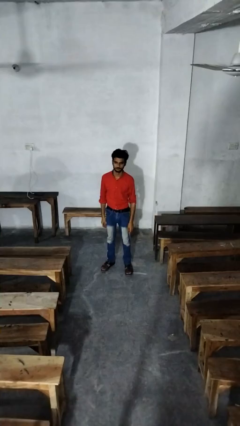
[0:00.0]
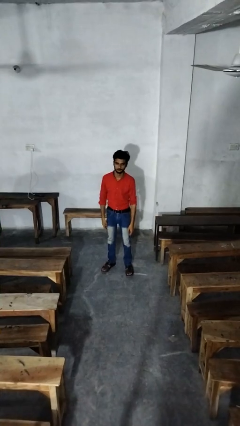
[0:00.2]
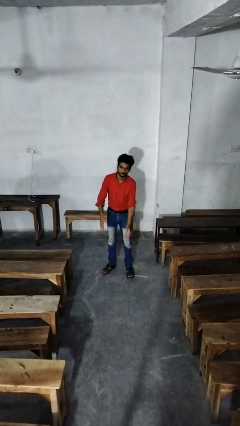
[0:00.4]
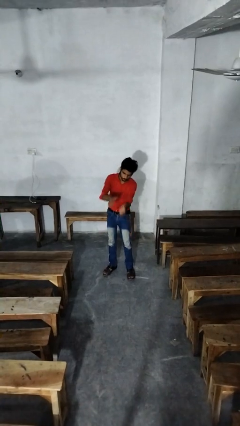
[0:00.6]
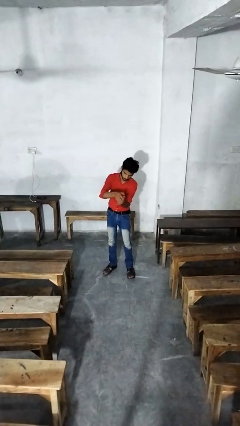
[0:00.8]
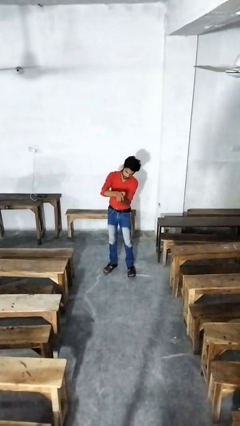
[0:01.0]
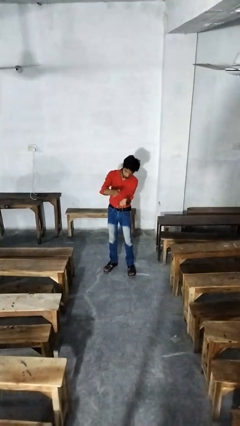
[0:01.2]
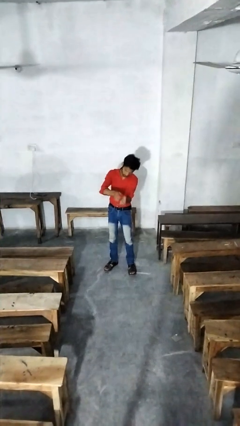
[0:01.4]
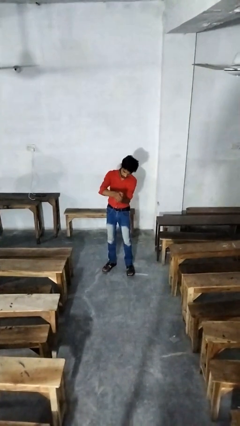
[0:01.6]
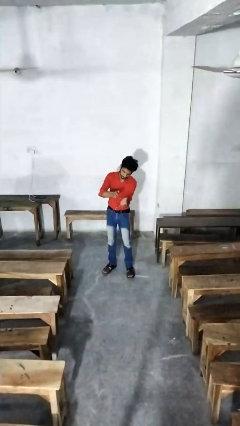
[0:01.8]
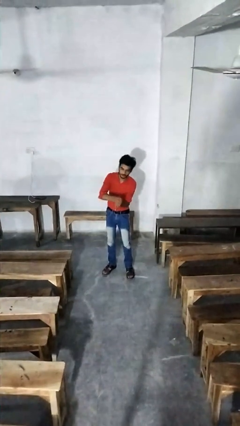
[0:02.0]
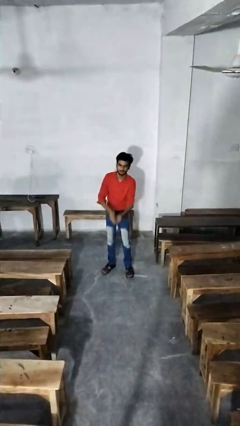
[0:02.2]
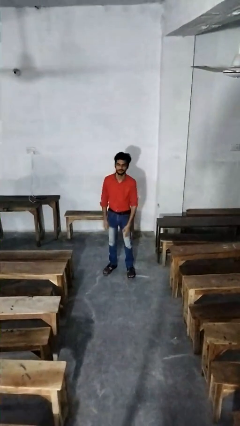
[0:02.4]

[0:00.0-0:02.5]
person claps hands

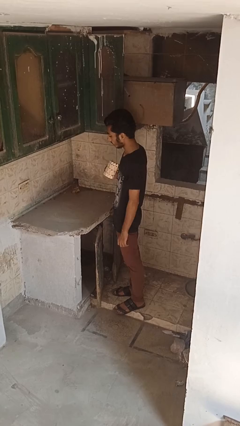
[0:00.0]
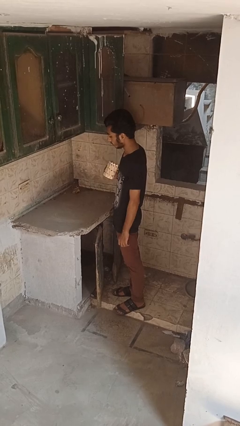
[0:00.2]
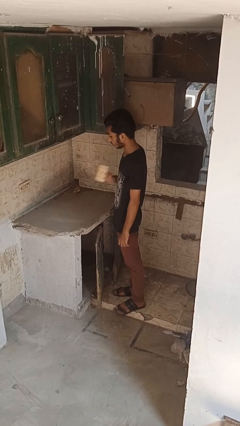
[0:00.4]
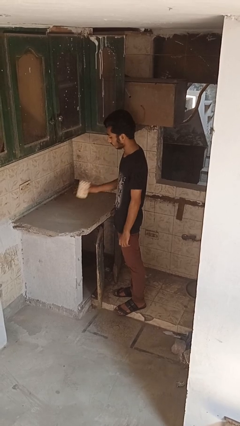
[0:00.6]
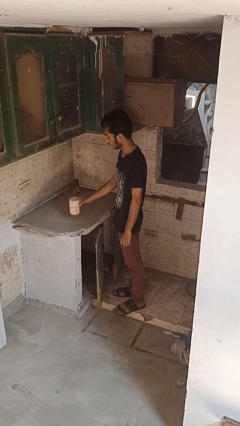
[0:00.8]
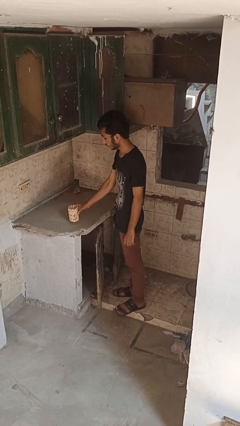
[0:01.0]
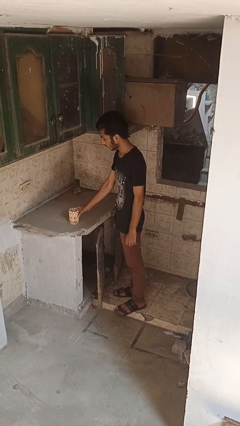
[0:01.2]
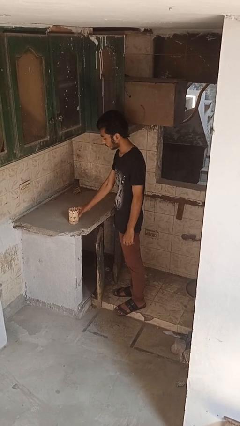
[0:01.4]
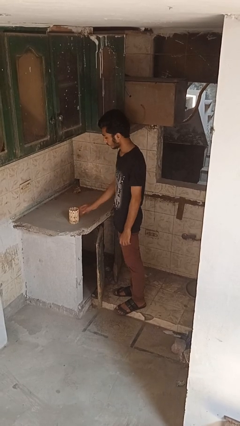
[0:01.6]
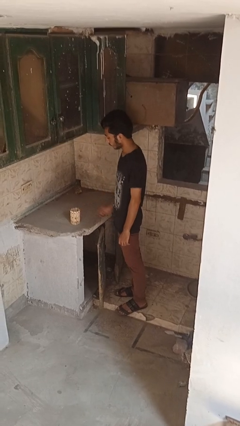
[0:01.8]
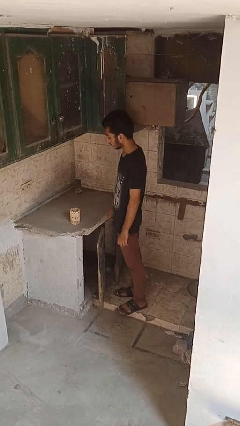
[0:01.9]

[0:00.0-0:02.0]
person puts down object on countertop

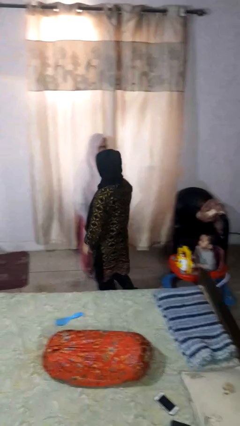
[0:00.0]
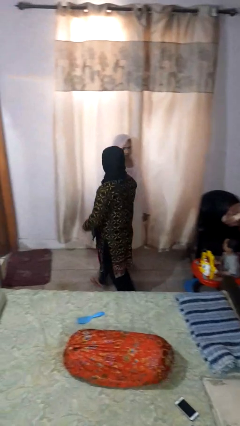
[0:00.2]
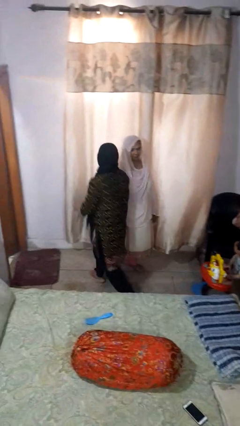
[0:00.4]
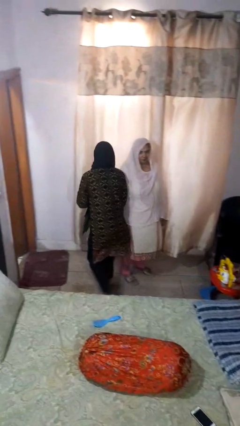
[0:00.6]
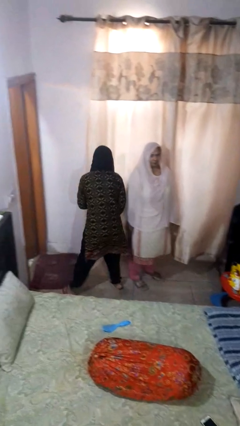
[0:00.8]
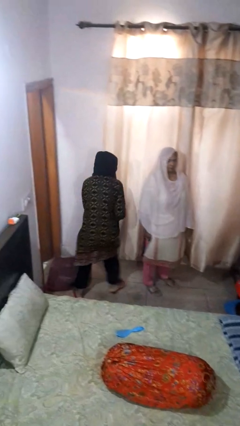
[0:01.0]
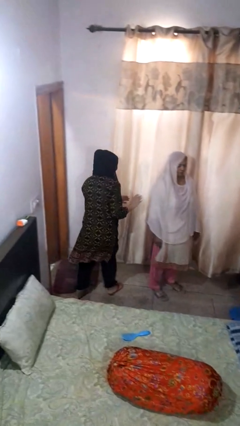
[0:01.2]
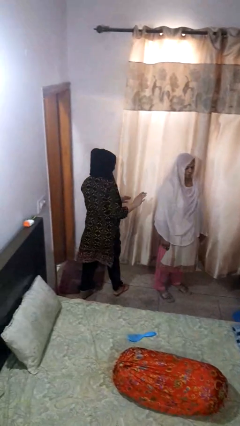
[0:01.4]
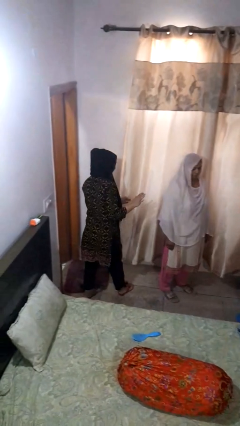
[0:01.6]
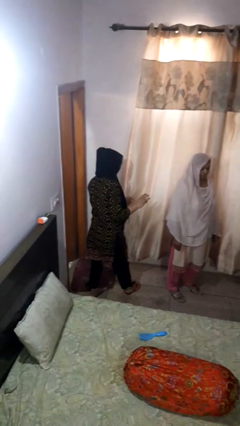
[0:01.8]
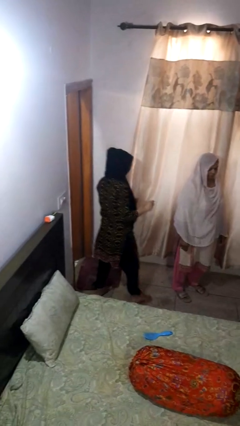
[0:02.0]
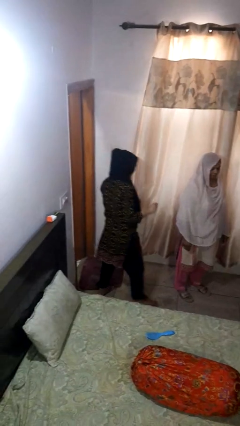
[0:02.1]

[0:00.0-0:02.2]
person bumps into person

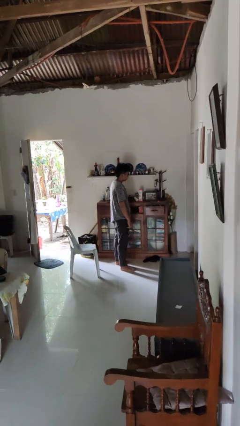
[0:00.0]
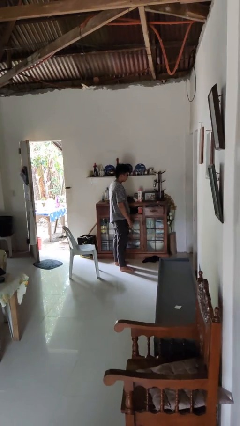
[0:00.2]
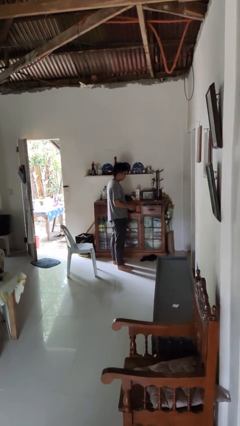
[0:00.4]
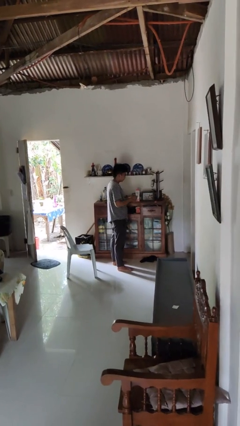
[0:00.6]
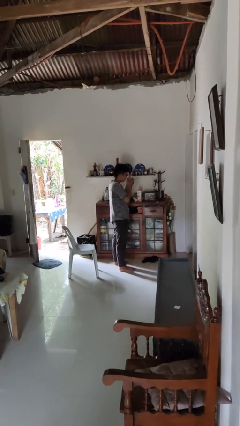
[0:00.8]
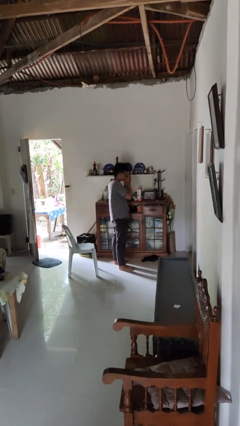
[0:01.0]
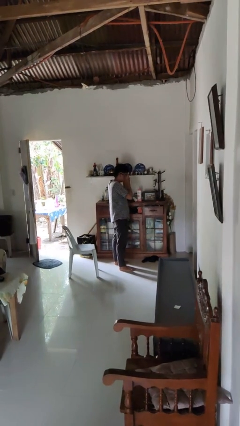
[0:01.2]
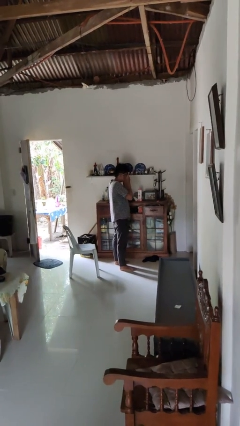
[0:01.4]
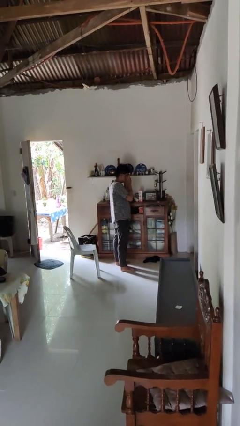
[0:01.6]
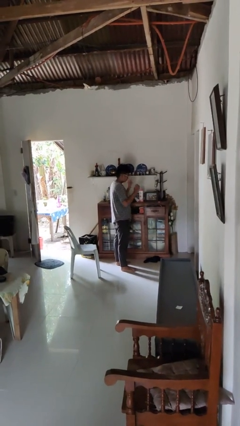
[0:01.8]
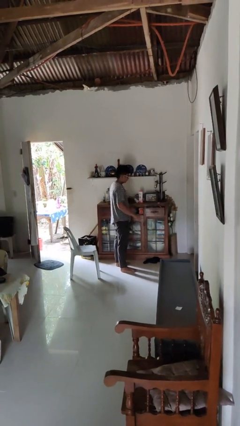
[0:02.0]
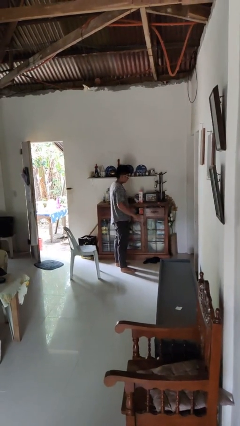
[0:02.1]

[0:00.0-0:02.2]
person puts on sunglasses

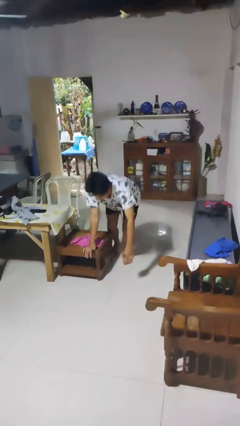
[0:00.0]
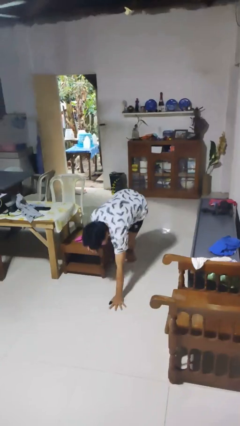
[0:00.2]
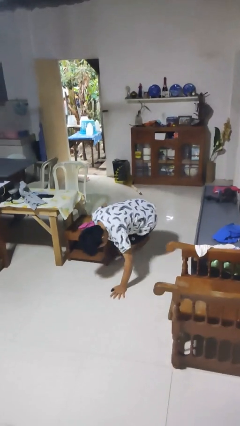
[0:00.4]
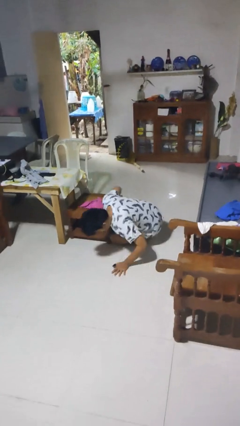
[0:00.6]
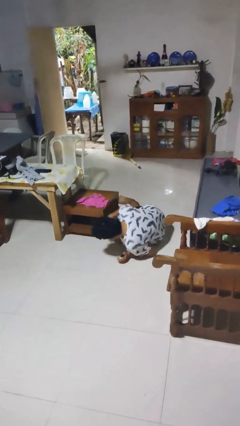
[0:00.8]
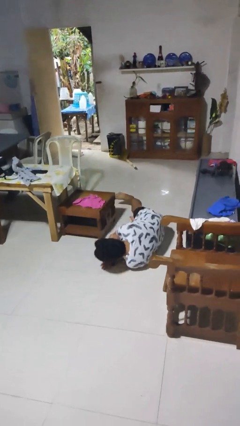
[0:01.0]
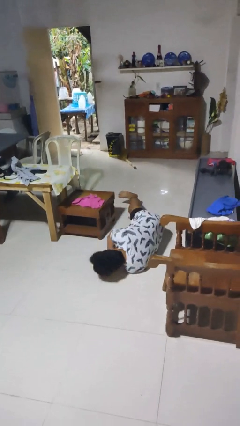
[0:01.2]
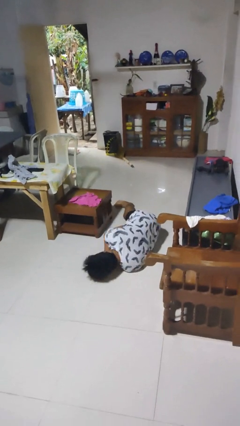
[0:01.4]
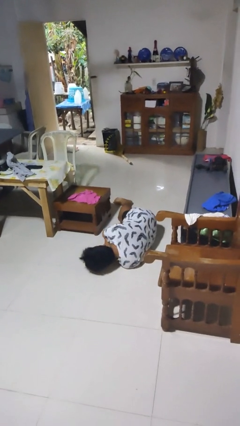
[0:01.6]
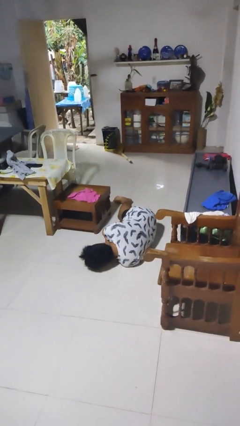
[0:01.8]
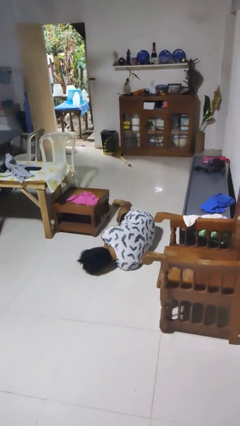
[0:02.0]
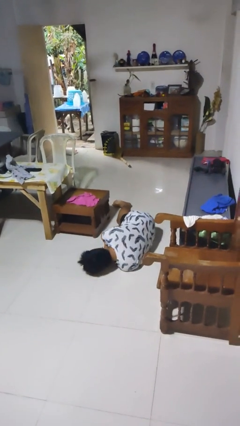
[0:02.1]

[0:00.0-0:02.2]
person lies down on floor

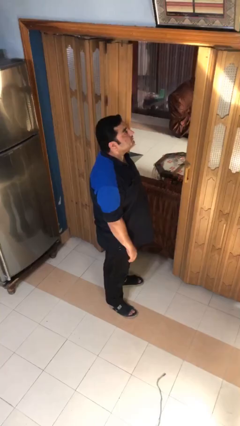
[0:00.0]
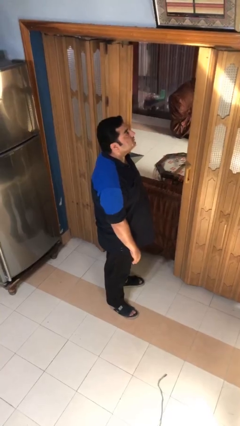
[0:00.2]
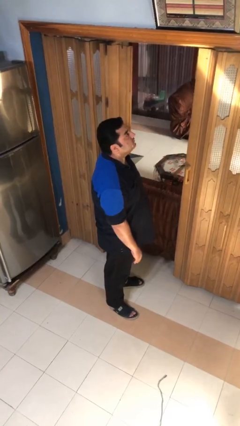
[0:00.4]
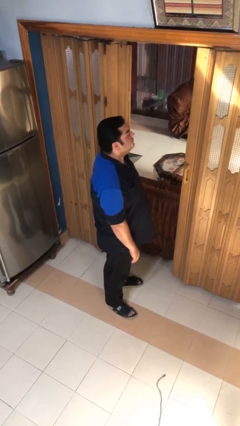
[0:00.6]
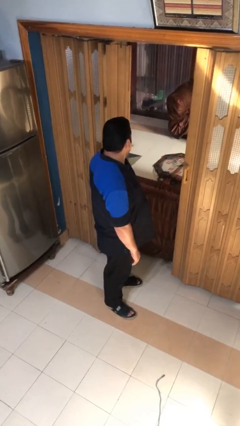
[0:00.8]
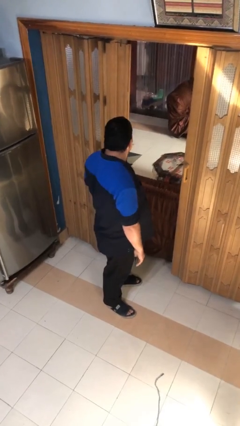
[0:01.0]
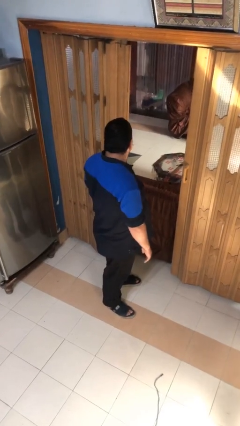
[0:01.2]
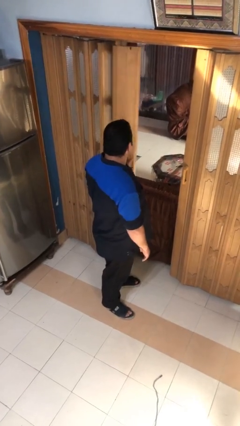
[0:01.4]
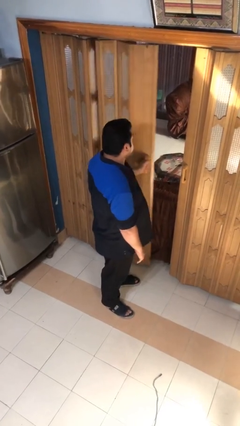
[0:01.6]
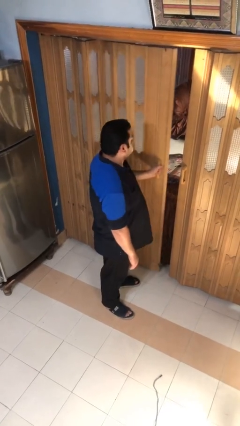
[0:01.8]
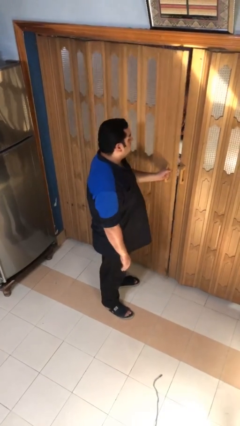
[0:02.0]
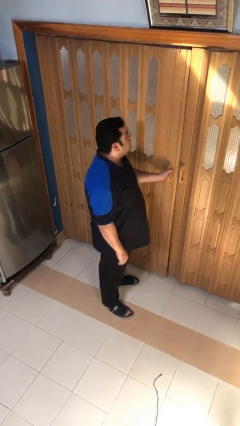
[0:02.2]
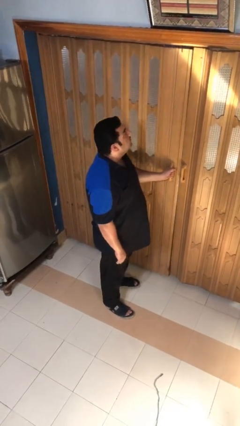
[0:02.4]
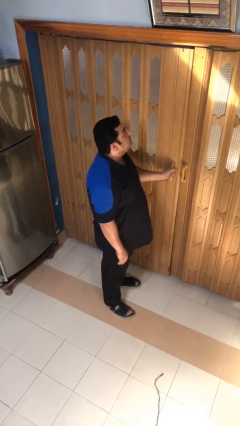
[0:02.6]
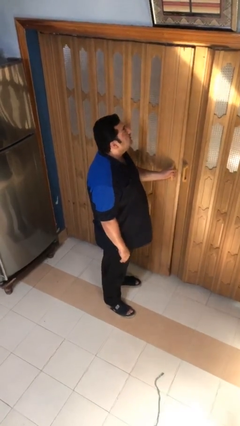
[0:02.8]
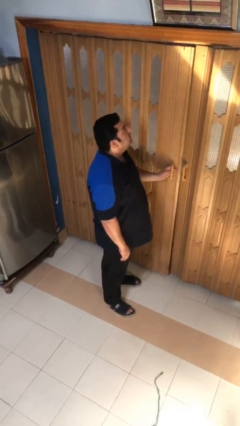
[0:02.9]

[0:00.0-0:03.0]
person closes sliding door

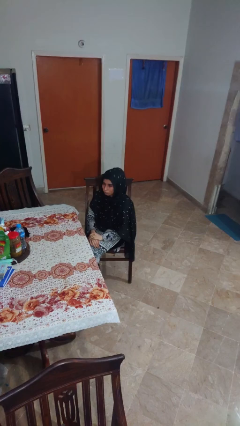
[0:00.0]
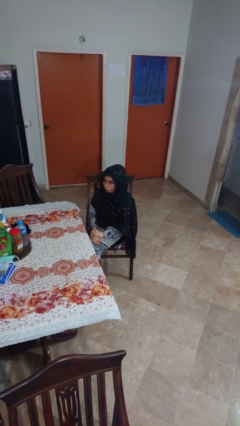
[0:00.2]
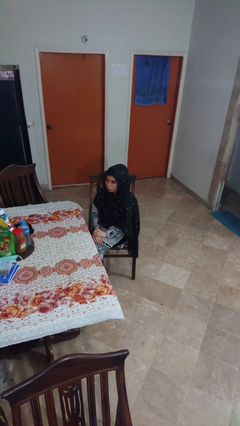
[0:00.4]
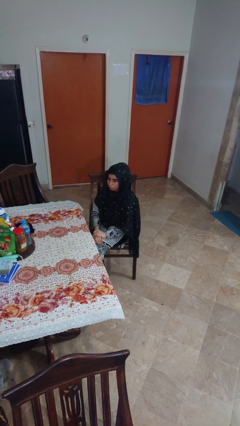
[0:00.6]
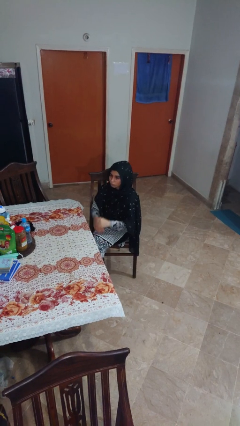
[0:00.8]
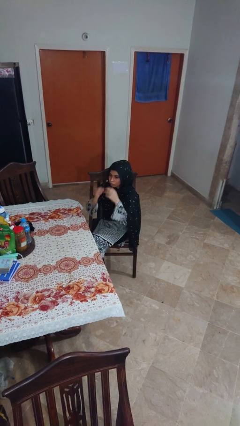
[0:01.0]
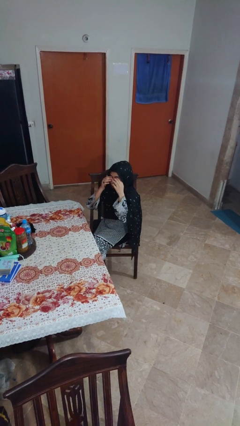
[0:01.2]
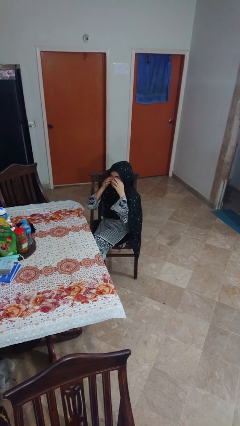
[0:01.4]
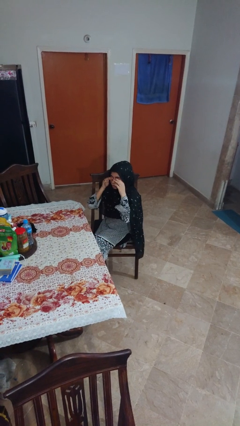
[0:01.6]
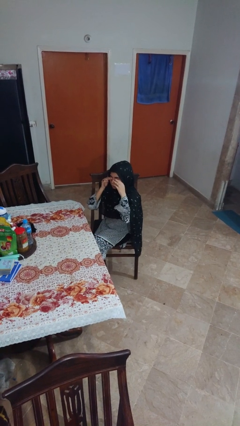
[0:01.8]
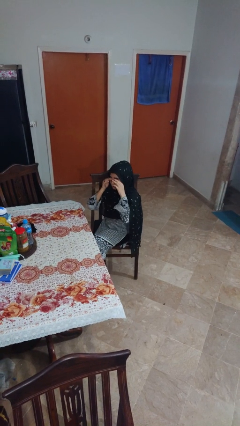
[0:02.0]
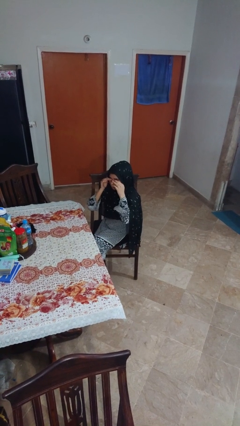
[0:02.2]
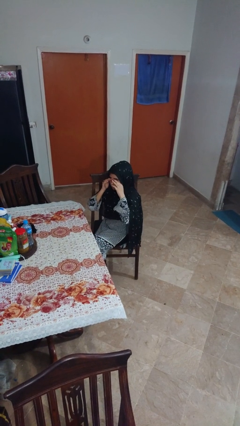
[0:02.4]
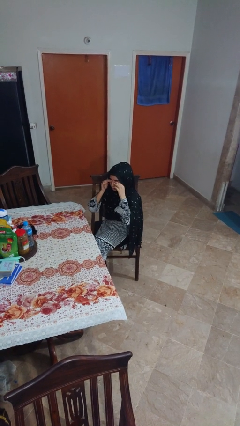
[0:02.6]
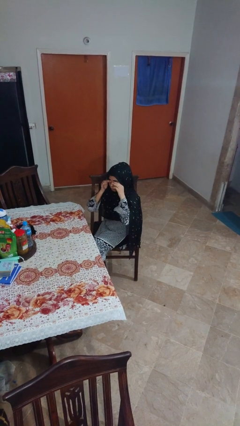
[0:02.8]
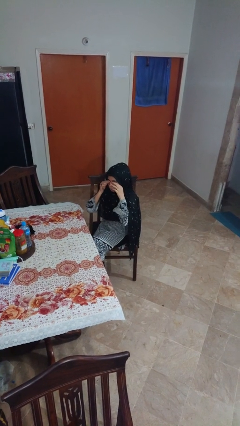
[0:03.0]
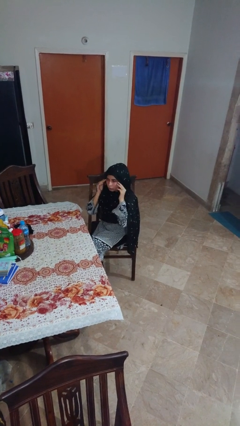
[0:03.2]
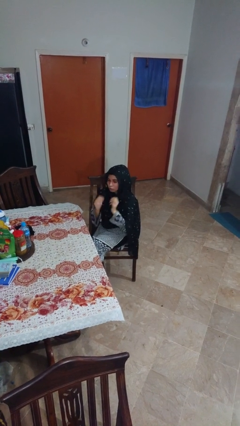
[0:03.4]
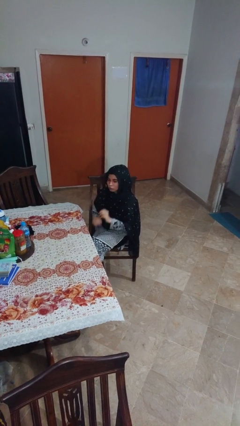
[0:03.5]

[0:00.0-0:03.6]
person rubs eyes
